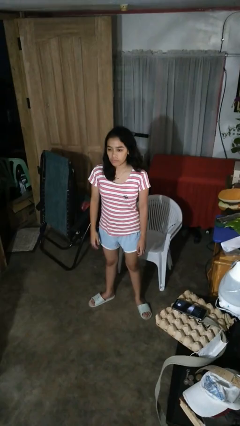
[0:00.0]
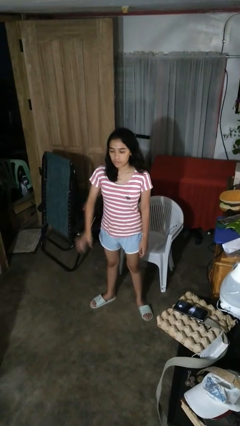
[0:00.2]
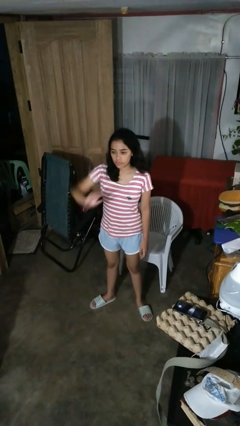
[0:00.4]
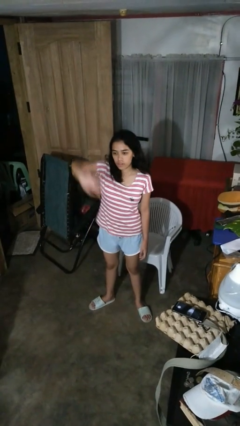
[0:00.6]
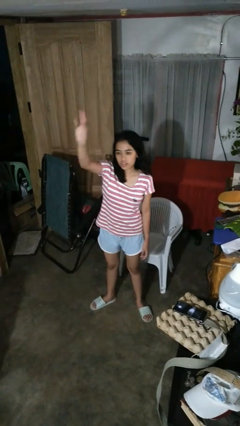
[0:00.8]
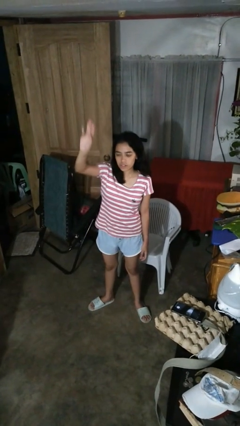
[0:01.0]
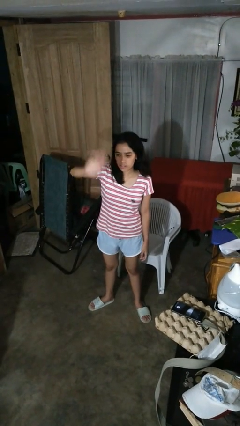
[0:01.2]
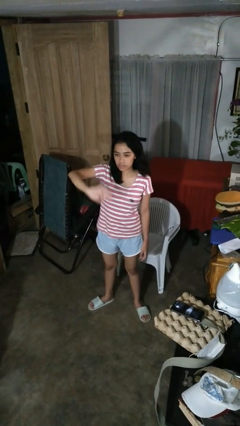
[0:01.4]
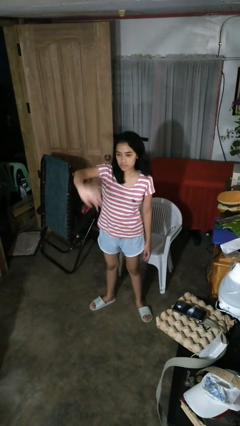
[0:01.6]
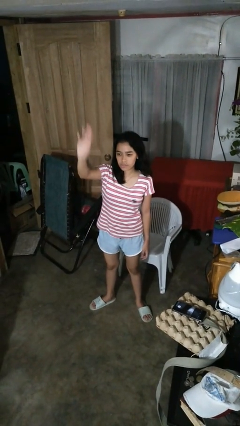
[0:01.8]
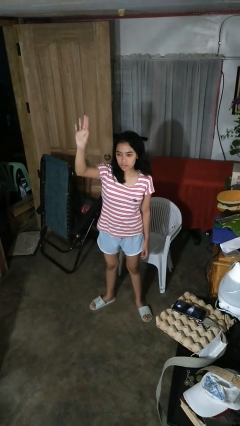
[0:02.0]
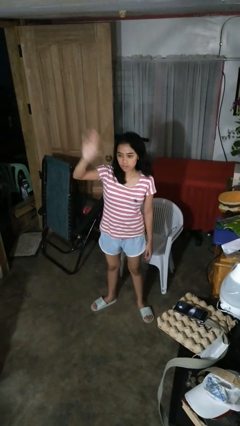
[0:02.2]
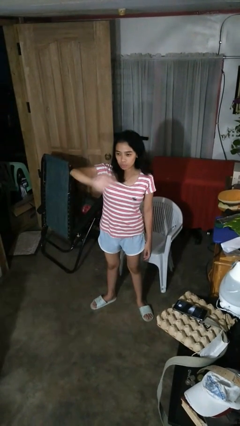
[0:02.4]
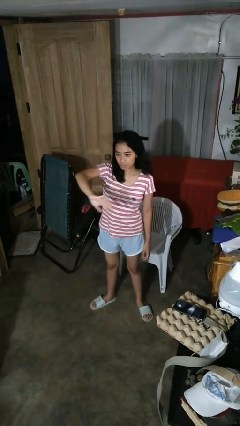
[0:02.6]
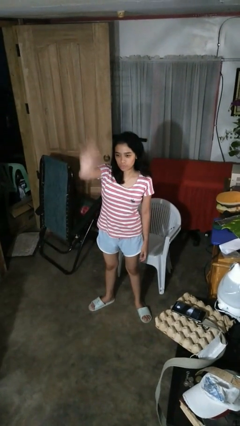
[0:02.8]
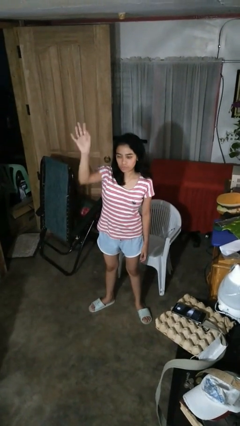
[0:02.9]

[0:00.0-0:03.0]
person gestures swipe up

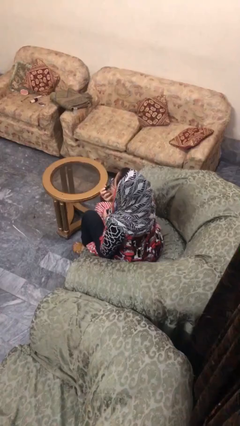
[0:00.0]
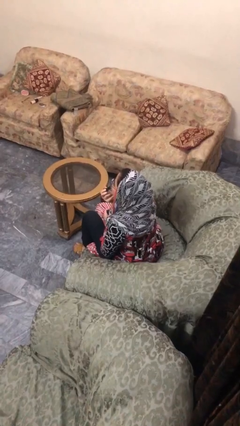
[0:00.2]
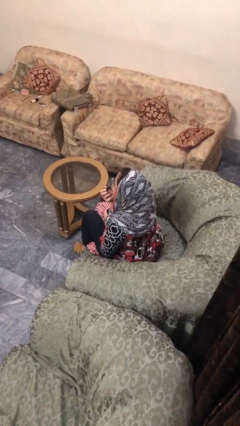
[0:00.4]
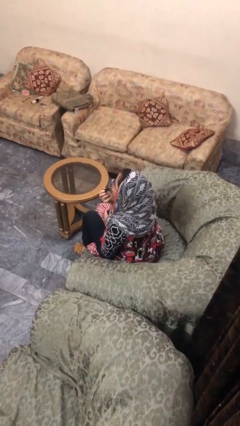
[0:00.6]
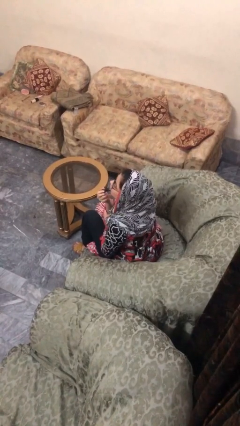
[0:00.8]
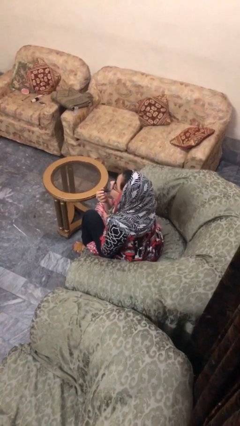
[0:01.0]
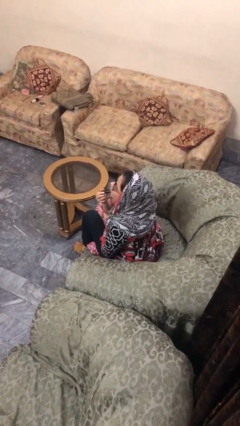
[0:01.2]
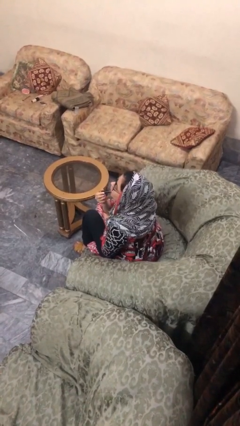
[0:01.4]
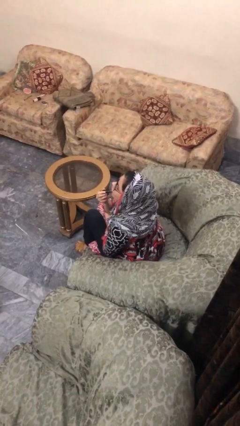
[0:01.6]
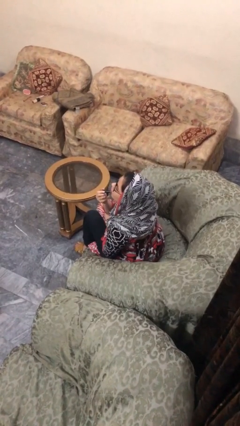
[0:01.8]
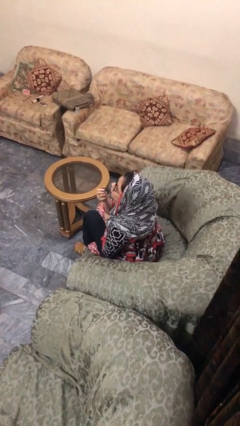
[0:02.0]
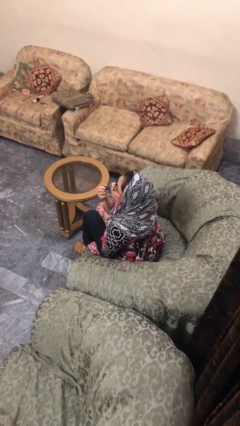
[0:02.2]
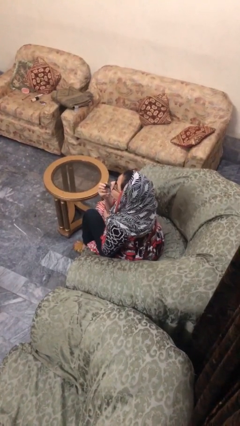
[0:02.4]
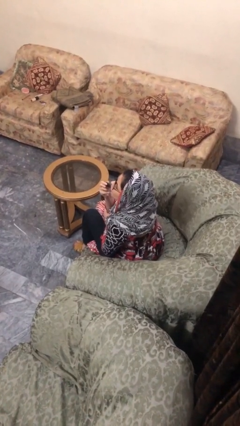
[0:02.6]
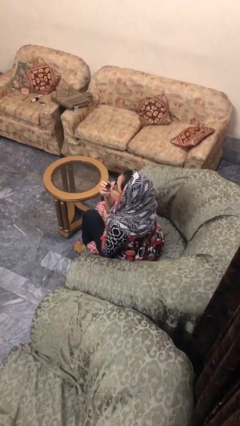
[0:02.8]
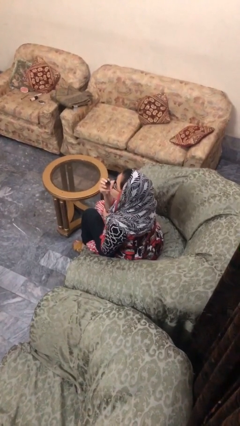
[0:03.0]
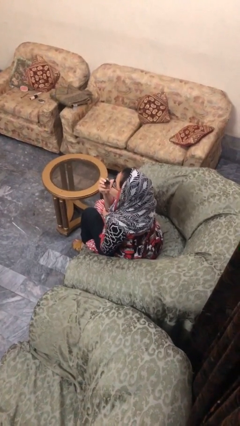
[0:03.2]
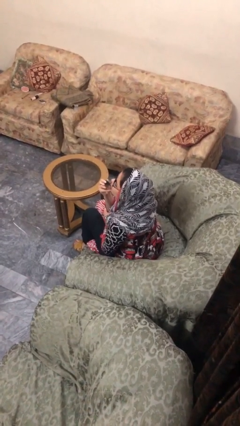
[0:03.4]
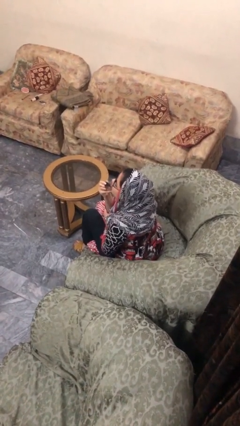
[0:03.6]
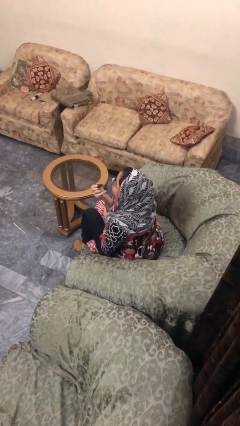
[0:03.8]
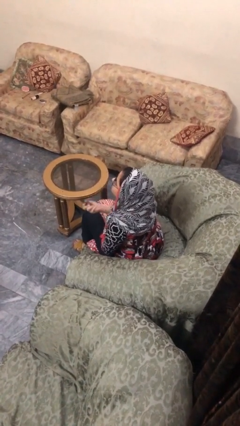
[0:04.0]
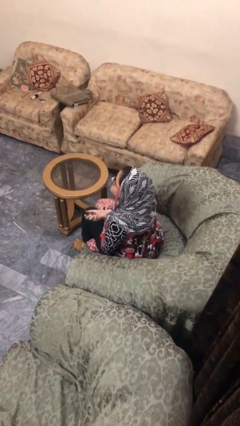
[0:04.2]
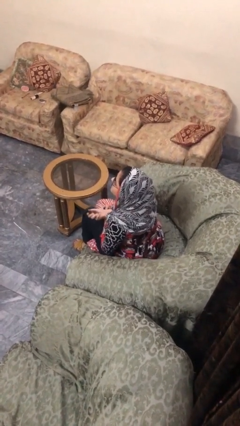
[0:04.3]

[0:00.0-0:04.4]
person applies lip makeup

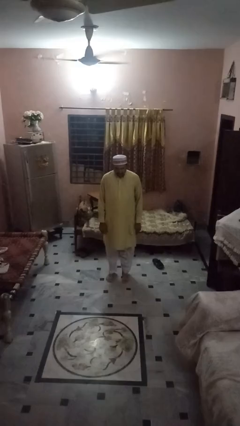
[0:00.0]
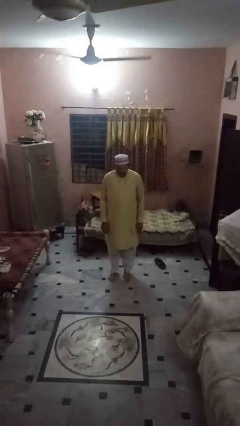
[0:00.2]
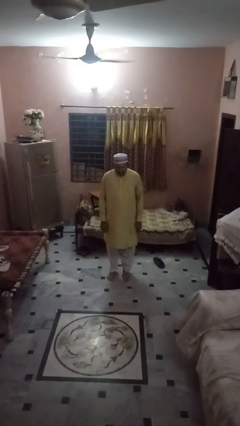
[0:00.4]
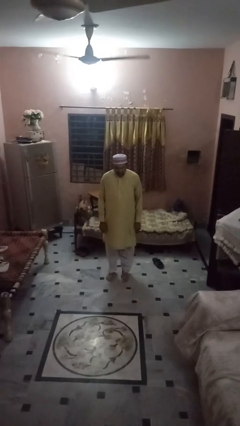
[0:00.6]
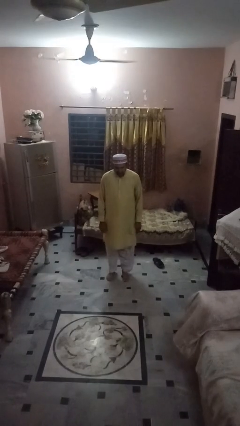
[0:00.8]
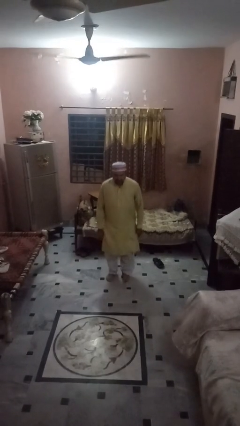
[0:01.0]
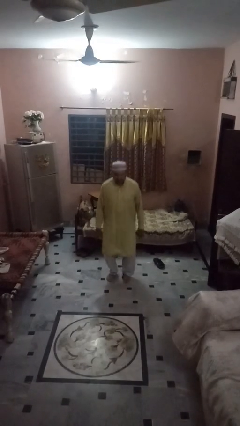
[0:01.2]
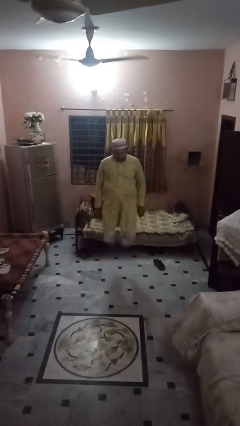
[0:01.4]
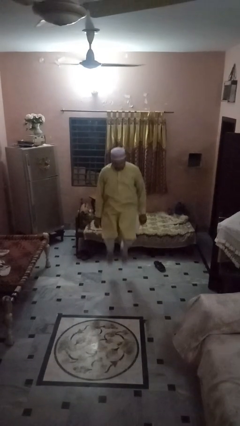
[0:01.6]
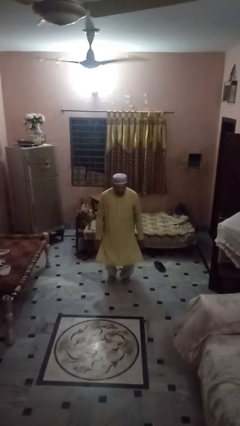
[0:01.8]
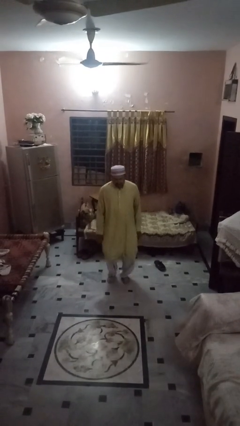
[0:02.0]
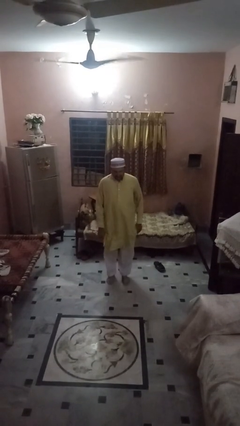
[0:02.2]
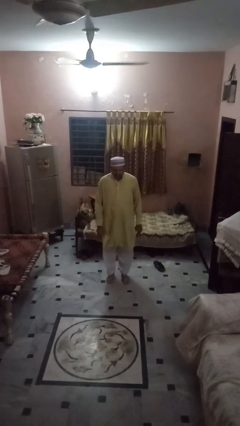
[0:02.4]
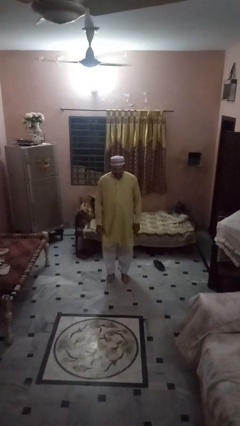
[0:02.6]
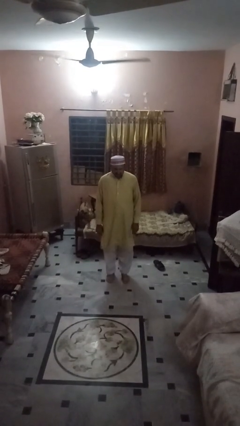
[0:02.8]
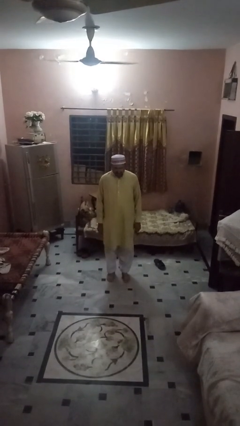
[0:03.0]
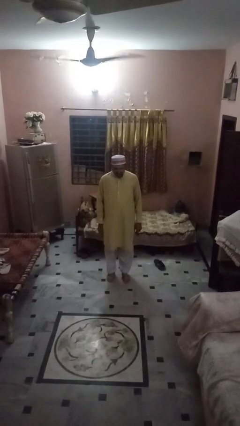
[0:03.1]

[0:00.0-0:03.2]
person jumps

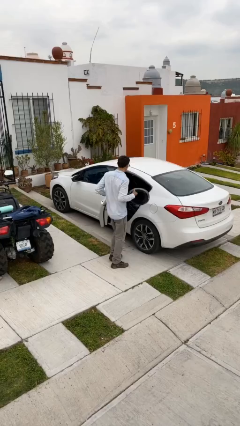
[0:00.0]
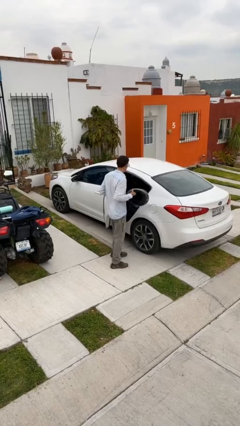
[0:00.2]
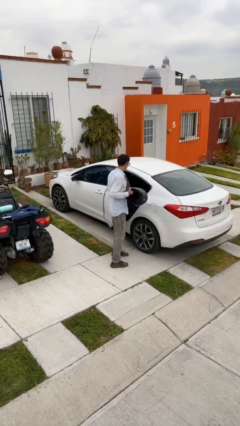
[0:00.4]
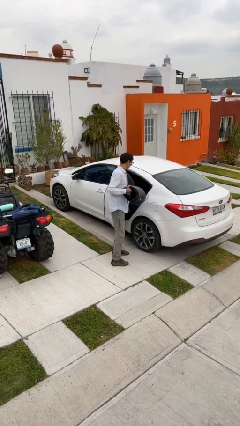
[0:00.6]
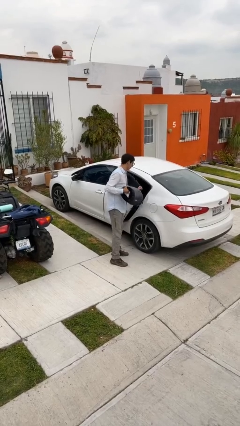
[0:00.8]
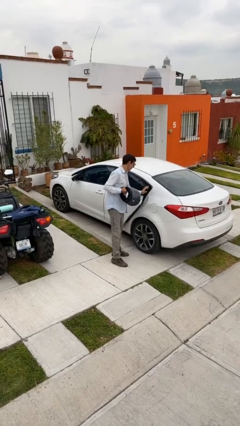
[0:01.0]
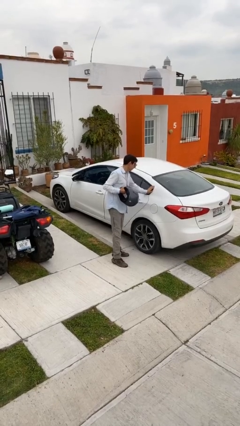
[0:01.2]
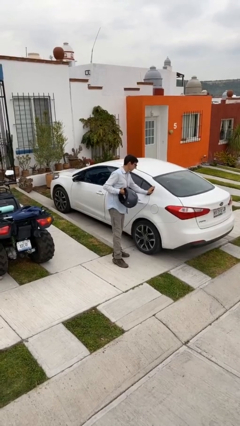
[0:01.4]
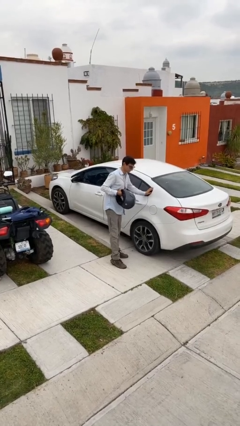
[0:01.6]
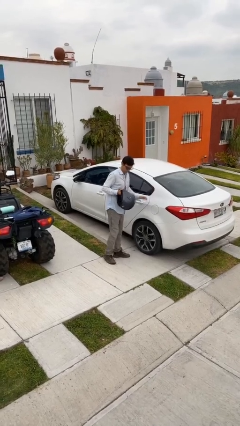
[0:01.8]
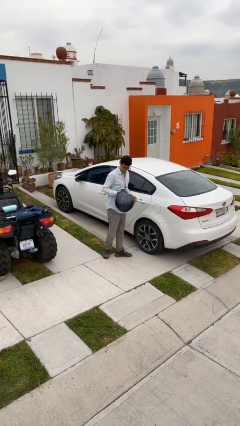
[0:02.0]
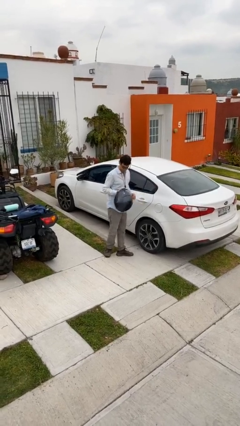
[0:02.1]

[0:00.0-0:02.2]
person closes car door

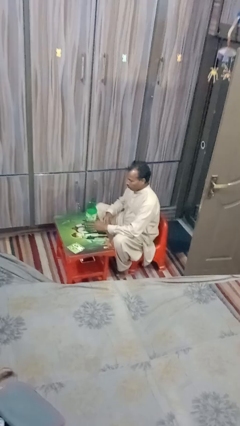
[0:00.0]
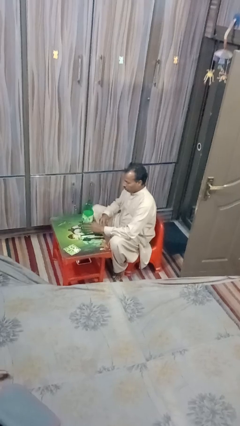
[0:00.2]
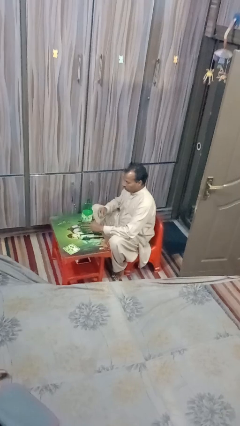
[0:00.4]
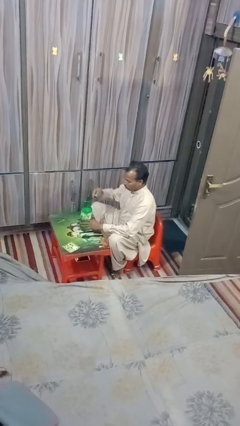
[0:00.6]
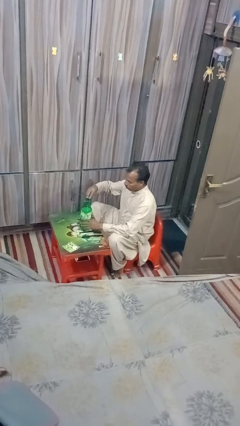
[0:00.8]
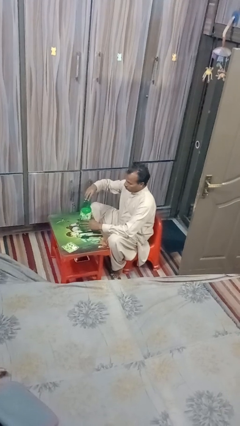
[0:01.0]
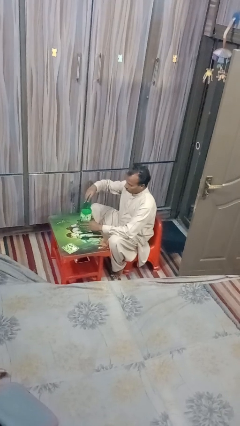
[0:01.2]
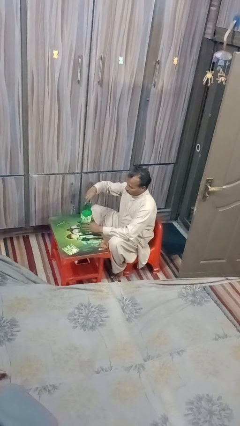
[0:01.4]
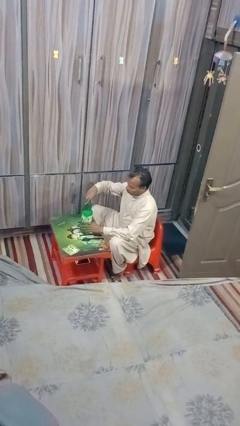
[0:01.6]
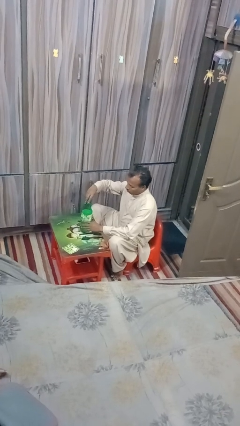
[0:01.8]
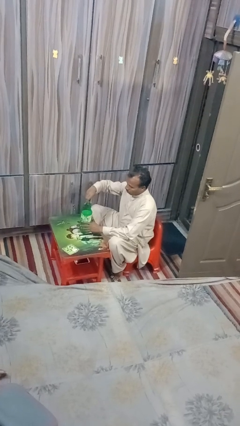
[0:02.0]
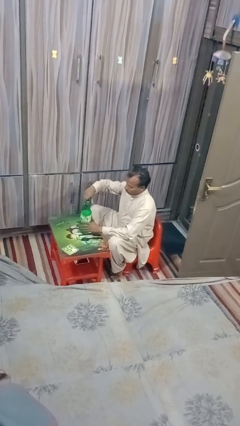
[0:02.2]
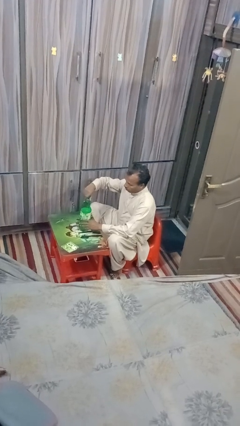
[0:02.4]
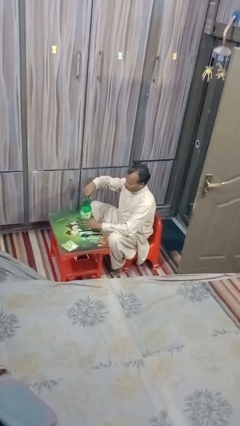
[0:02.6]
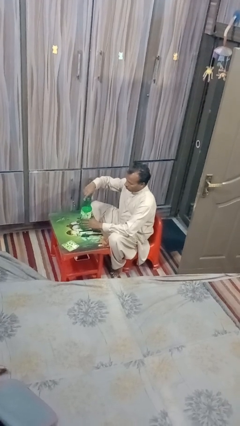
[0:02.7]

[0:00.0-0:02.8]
person screws lid to bottle

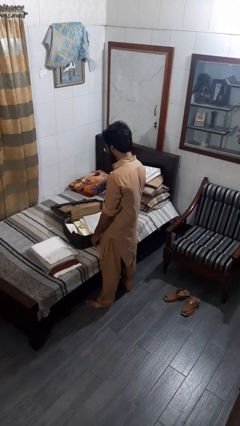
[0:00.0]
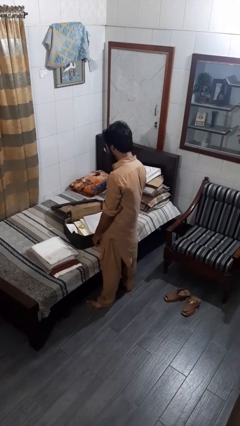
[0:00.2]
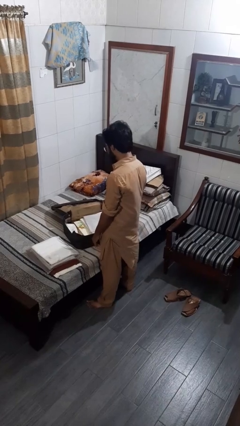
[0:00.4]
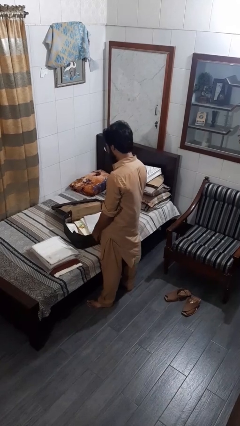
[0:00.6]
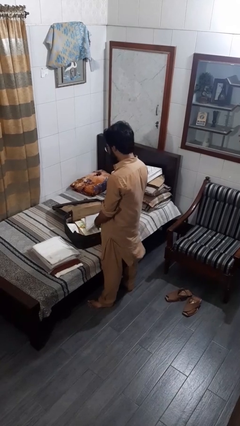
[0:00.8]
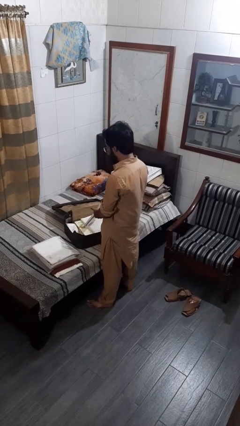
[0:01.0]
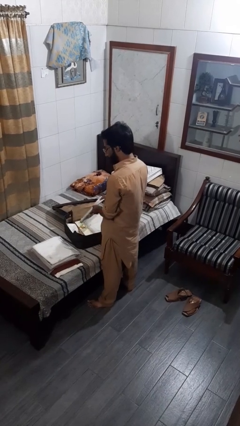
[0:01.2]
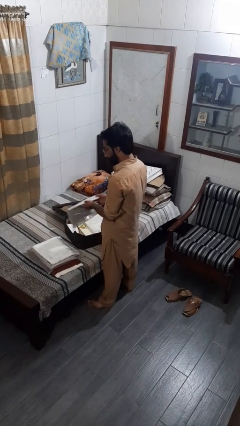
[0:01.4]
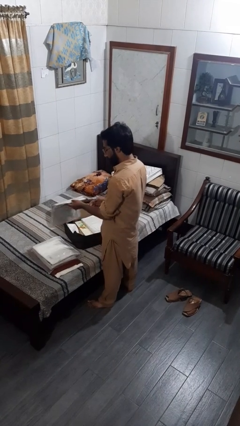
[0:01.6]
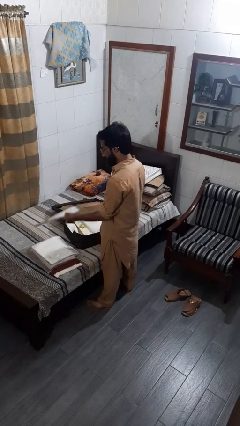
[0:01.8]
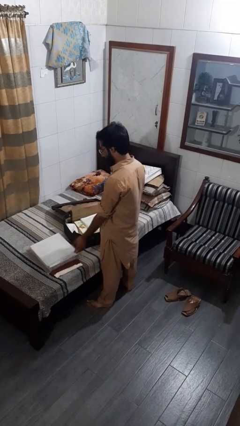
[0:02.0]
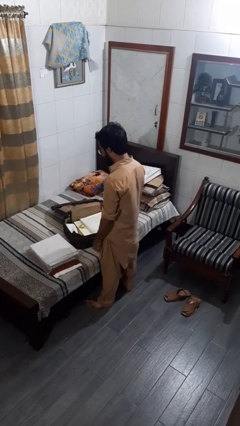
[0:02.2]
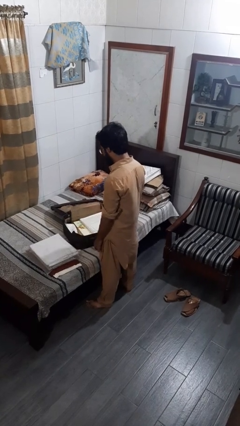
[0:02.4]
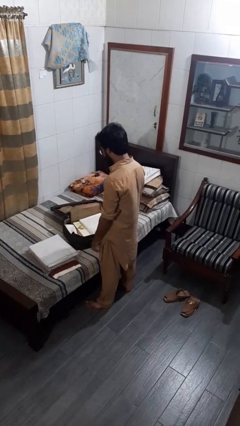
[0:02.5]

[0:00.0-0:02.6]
person unloads clothes from suitcase
